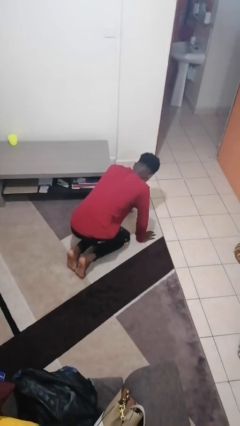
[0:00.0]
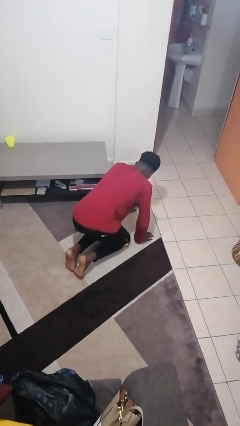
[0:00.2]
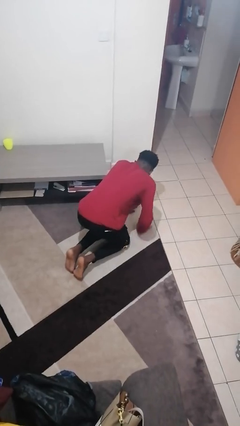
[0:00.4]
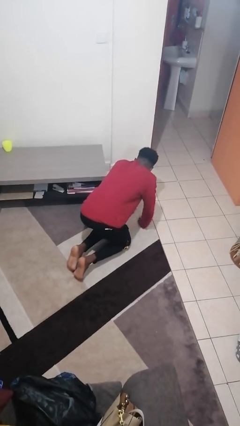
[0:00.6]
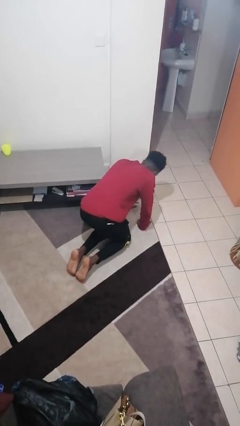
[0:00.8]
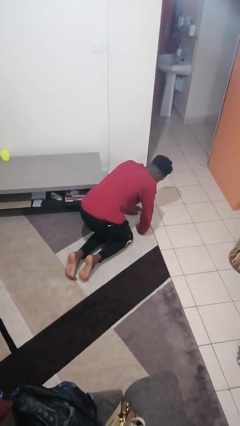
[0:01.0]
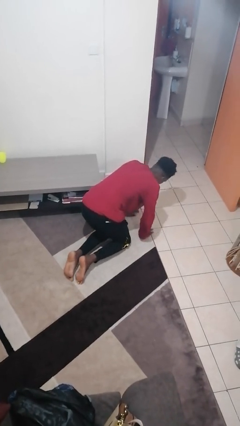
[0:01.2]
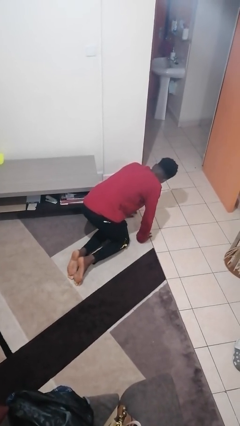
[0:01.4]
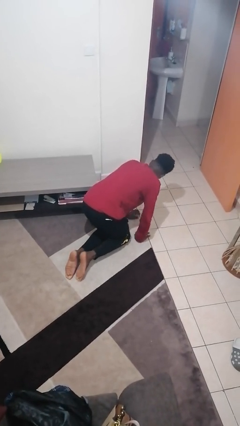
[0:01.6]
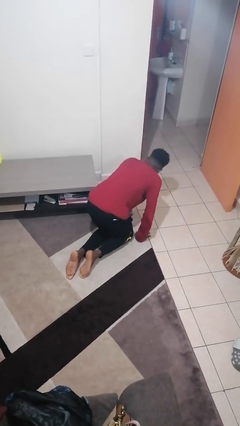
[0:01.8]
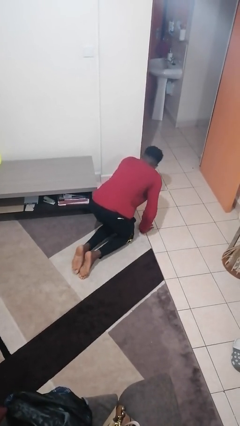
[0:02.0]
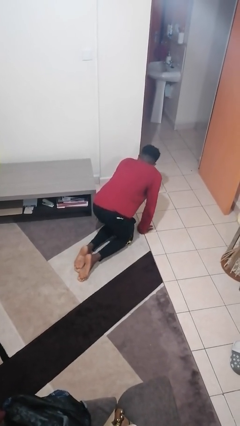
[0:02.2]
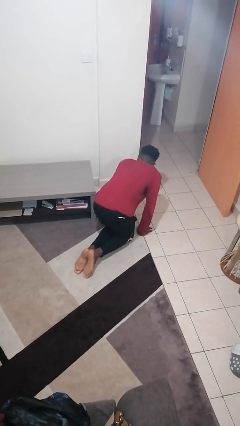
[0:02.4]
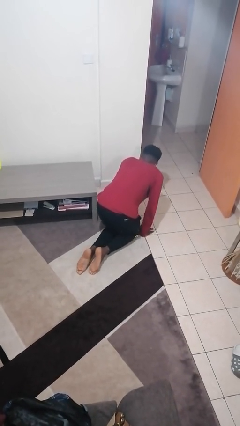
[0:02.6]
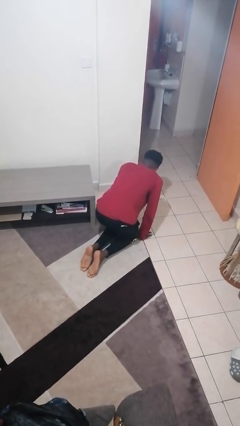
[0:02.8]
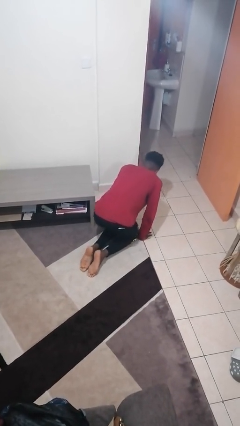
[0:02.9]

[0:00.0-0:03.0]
person crawls

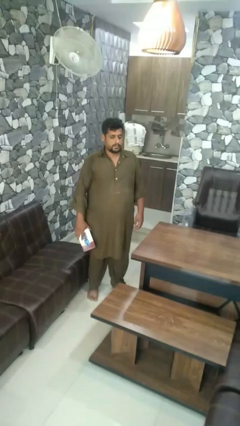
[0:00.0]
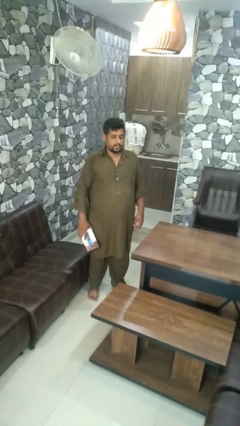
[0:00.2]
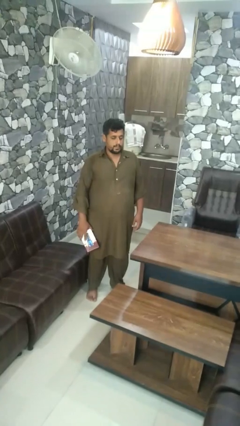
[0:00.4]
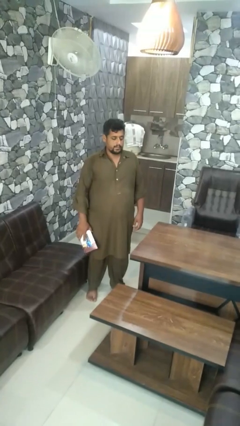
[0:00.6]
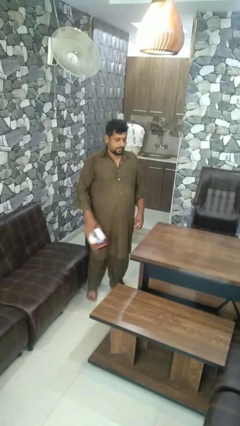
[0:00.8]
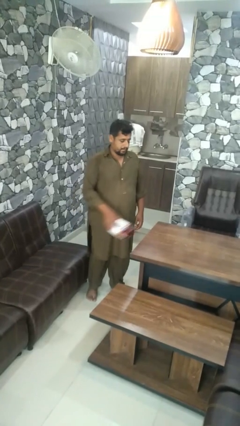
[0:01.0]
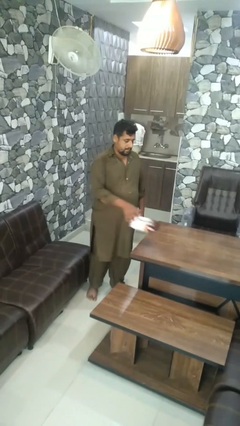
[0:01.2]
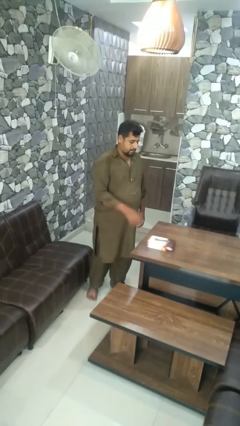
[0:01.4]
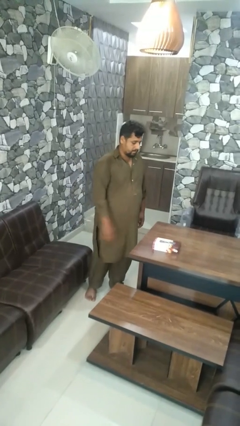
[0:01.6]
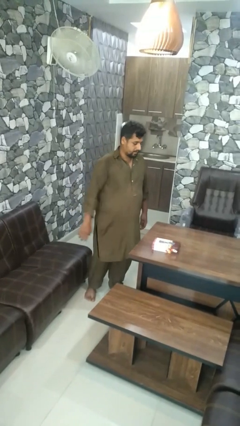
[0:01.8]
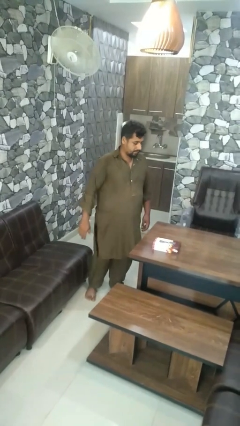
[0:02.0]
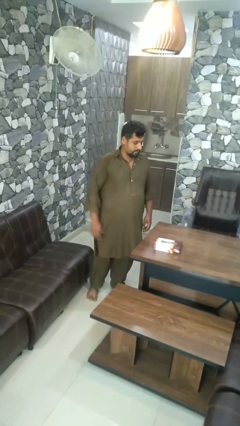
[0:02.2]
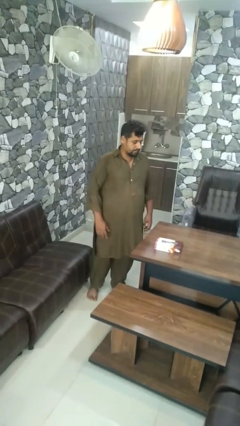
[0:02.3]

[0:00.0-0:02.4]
person throws object on table

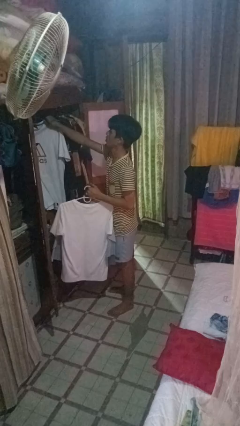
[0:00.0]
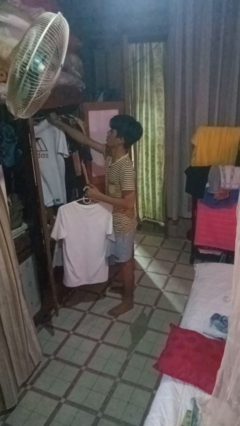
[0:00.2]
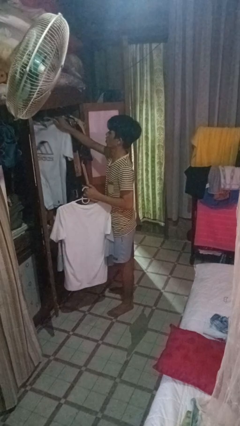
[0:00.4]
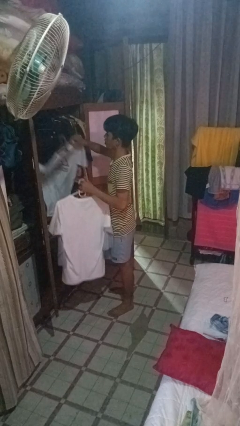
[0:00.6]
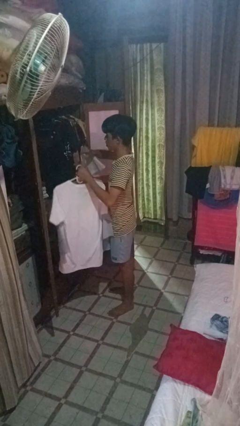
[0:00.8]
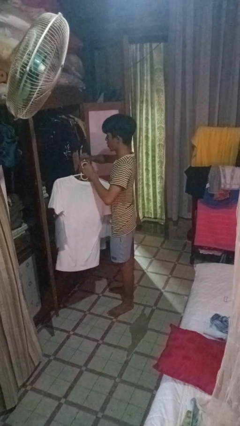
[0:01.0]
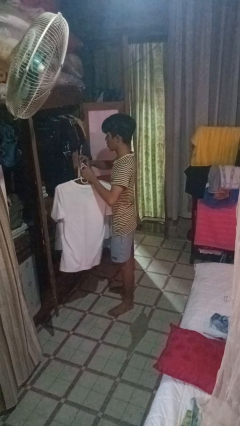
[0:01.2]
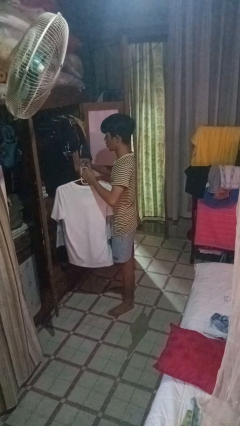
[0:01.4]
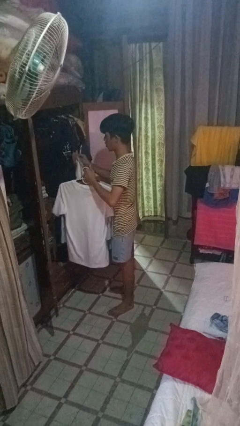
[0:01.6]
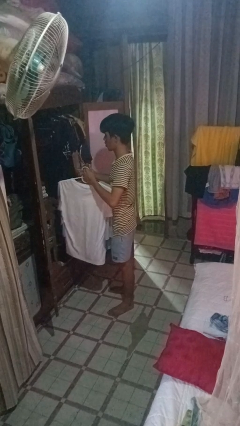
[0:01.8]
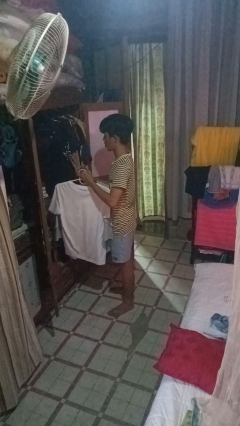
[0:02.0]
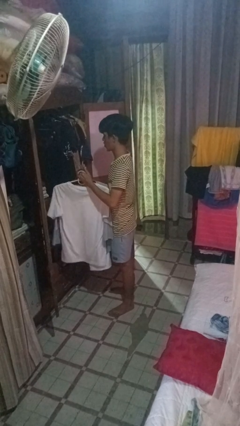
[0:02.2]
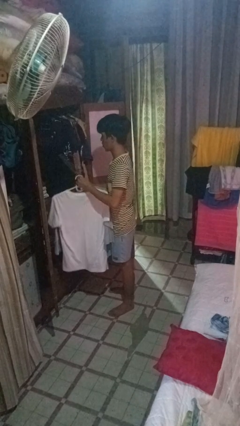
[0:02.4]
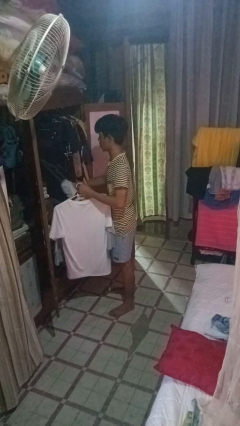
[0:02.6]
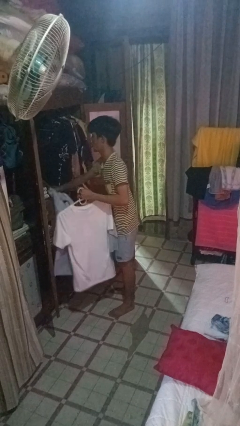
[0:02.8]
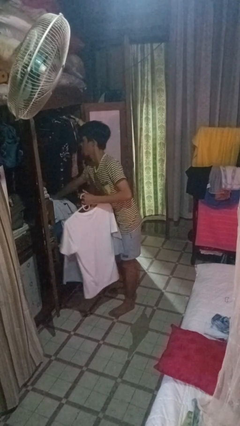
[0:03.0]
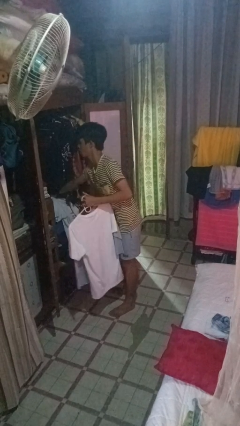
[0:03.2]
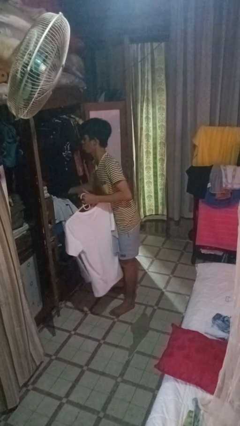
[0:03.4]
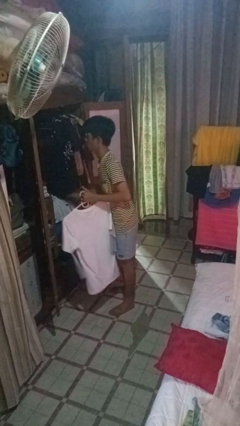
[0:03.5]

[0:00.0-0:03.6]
person takes clothes from closet

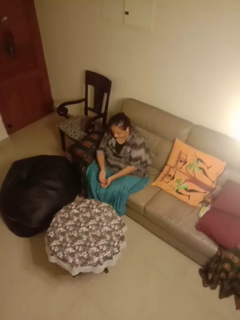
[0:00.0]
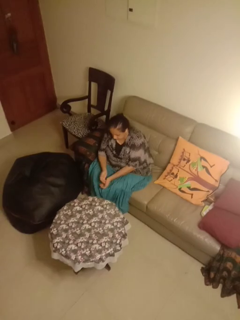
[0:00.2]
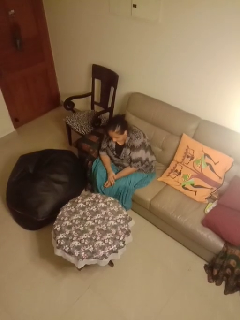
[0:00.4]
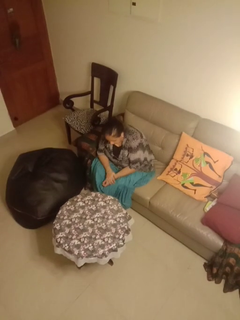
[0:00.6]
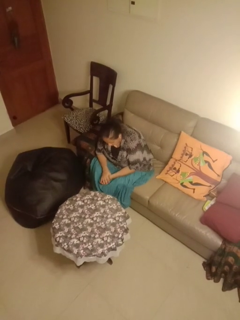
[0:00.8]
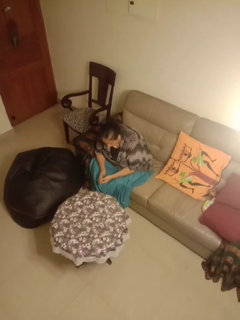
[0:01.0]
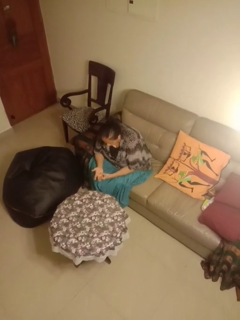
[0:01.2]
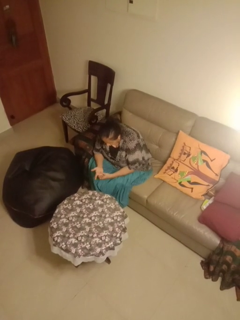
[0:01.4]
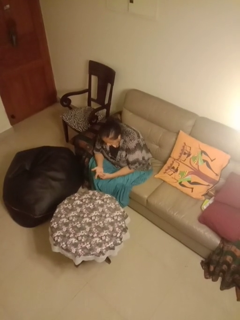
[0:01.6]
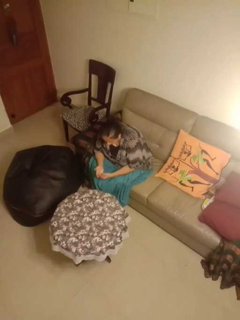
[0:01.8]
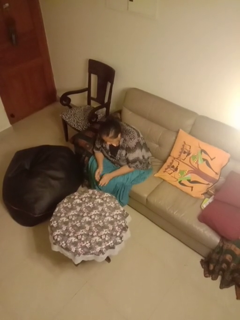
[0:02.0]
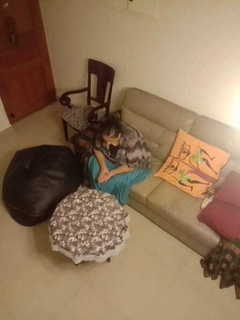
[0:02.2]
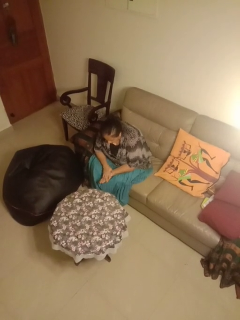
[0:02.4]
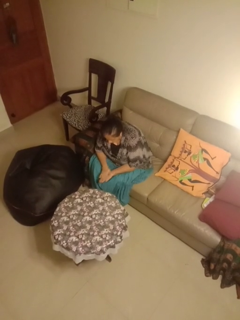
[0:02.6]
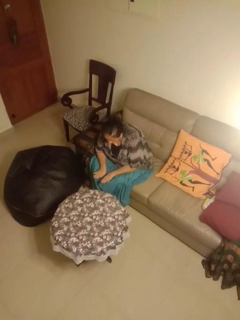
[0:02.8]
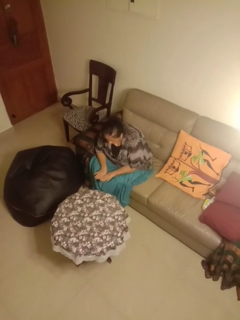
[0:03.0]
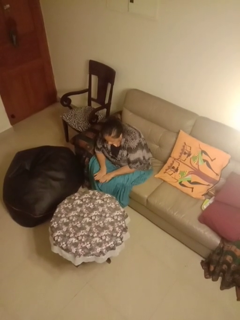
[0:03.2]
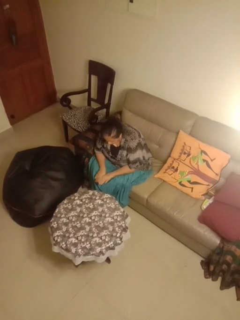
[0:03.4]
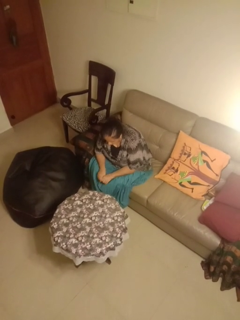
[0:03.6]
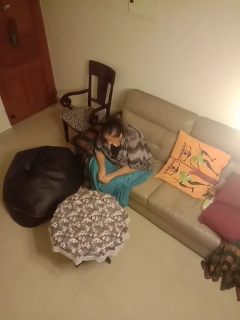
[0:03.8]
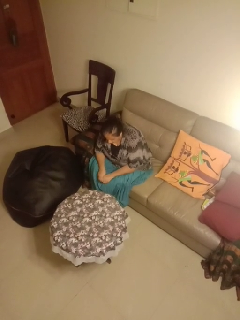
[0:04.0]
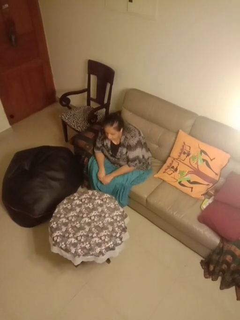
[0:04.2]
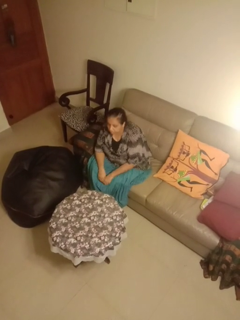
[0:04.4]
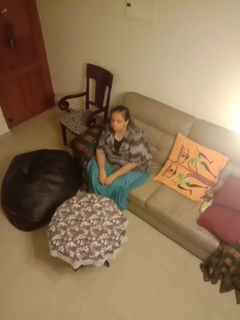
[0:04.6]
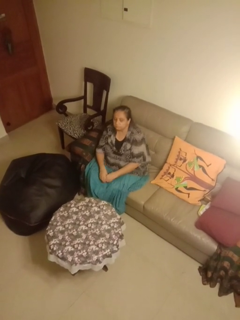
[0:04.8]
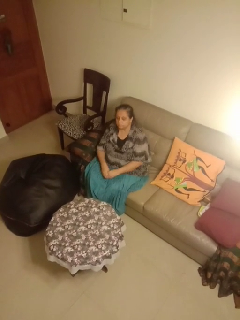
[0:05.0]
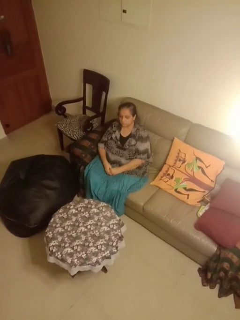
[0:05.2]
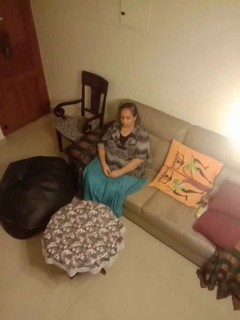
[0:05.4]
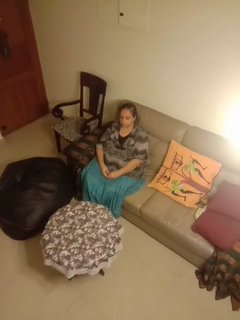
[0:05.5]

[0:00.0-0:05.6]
person looks at hands in lap

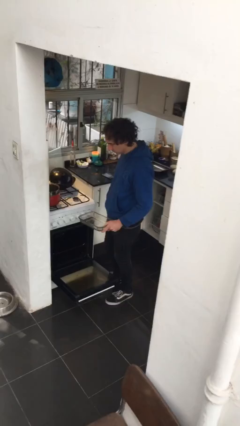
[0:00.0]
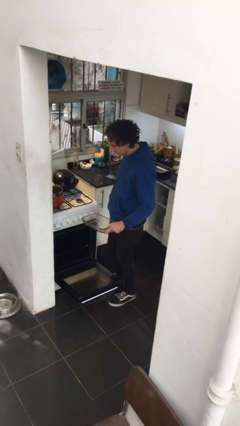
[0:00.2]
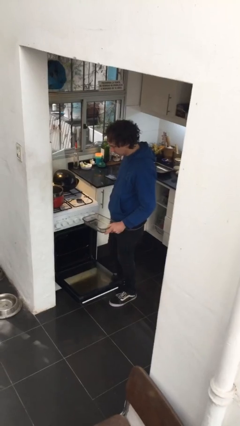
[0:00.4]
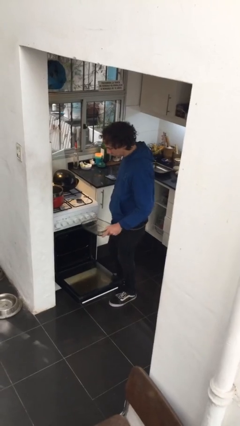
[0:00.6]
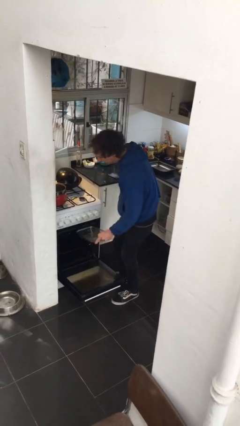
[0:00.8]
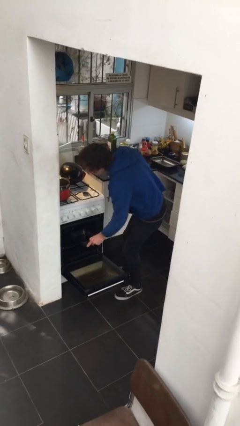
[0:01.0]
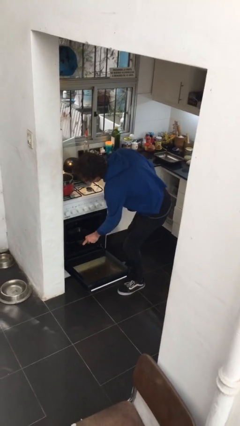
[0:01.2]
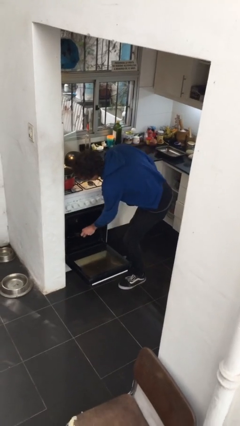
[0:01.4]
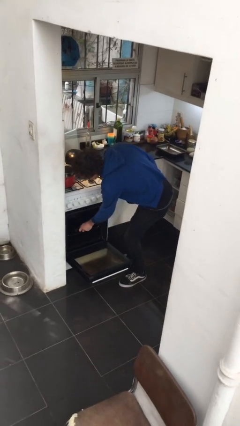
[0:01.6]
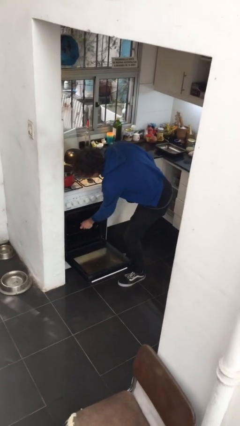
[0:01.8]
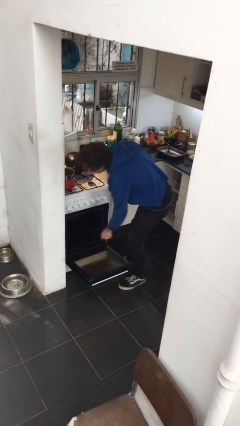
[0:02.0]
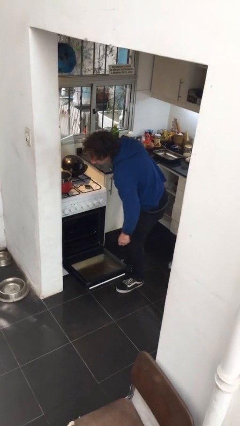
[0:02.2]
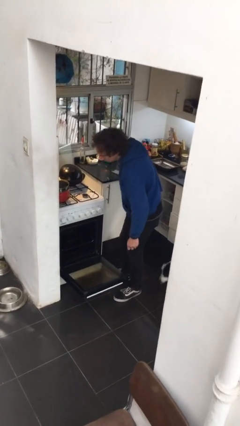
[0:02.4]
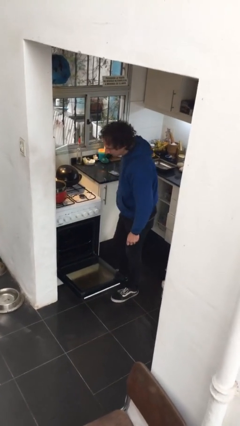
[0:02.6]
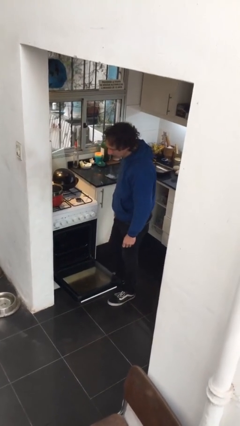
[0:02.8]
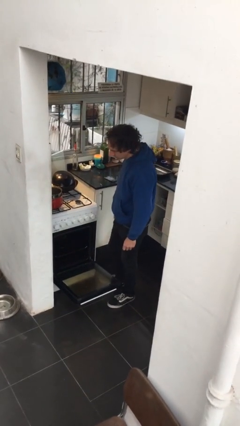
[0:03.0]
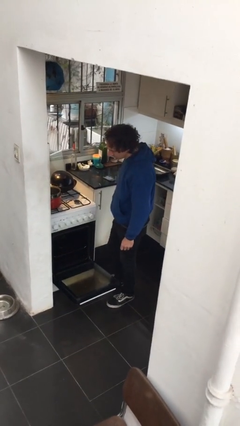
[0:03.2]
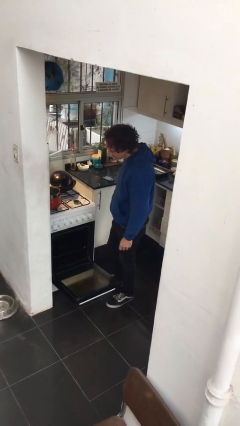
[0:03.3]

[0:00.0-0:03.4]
person puts object into oven

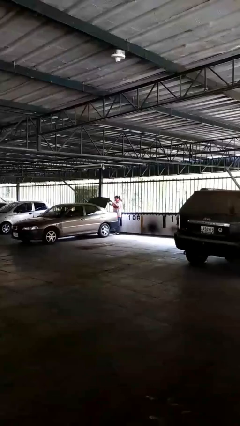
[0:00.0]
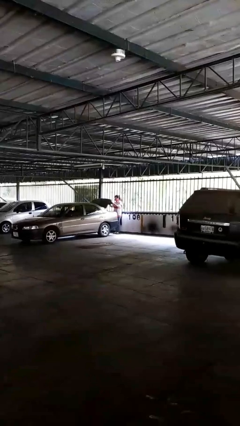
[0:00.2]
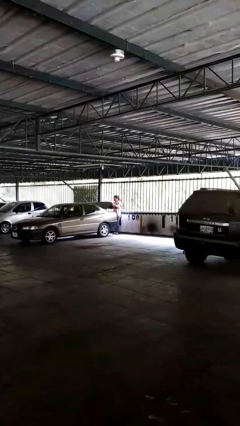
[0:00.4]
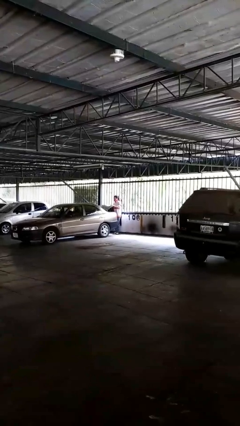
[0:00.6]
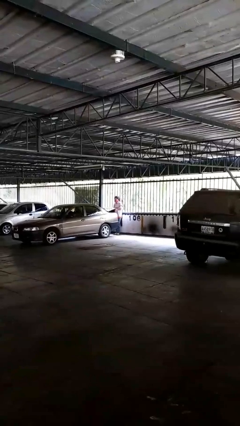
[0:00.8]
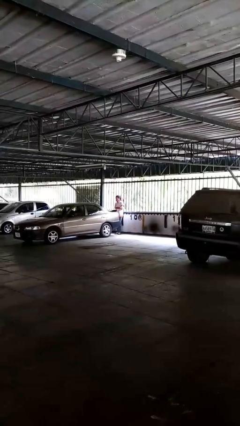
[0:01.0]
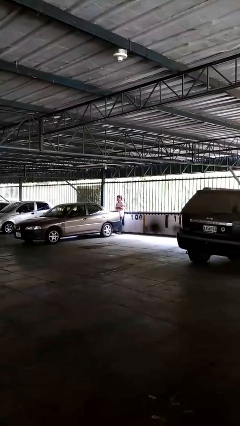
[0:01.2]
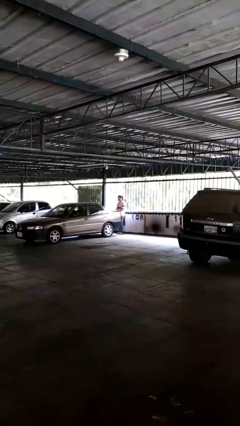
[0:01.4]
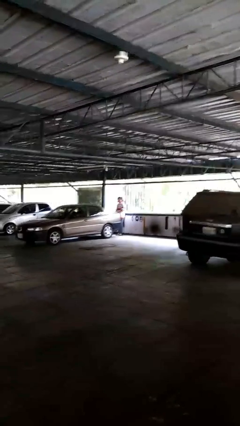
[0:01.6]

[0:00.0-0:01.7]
person closes car trunk
